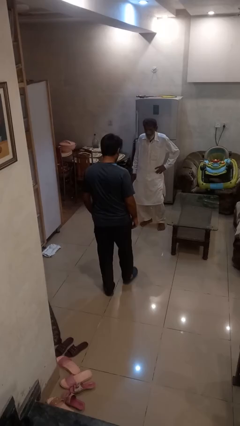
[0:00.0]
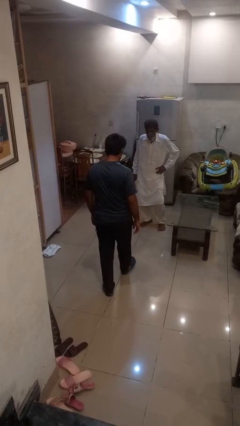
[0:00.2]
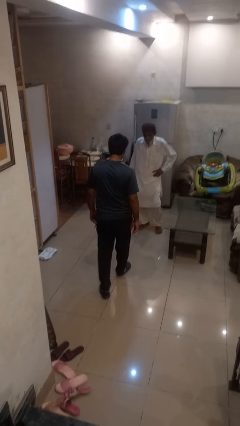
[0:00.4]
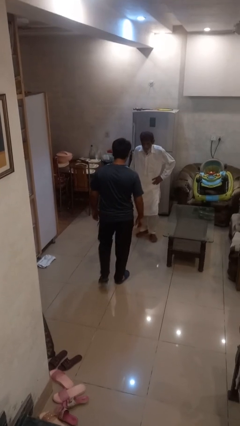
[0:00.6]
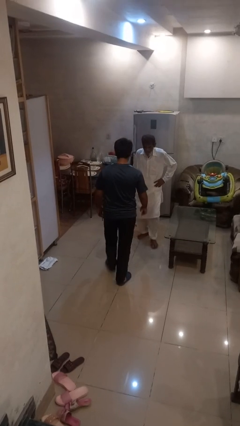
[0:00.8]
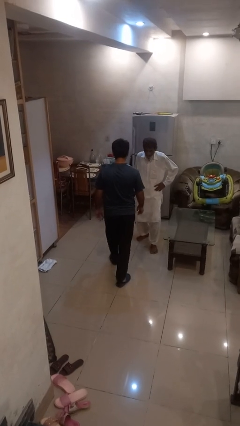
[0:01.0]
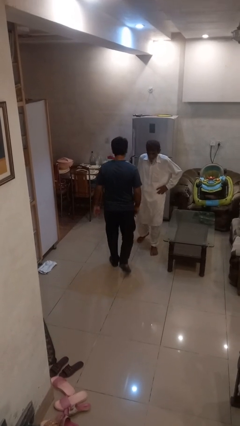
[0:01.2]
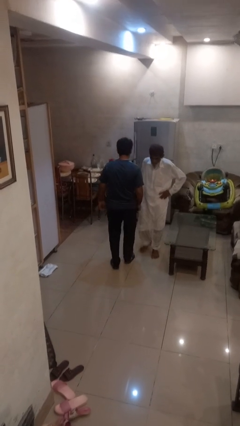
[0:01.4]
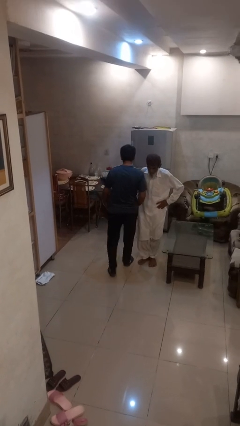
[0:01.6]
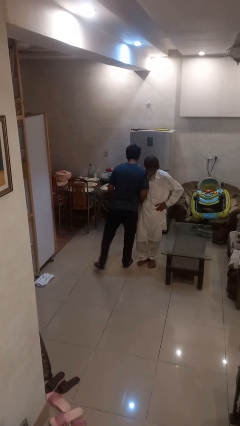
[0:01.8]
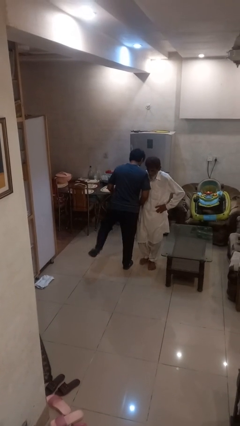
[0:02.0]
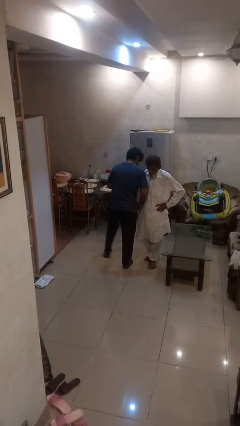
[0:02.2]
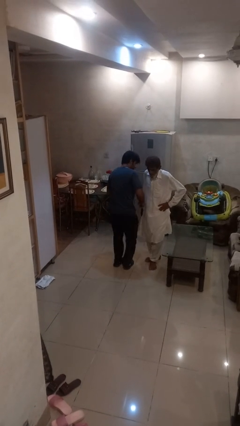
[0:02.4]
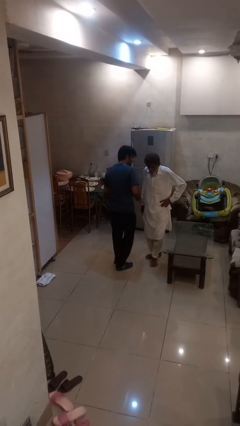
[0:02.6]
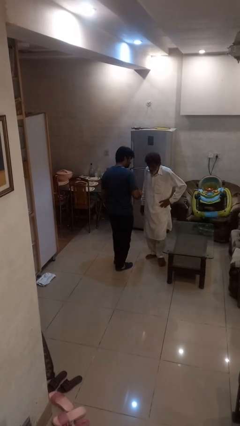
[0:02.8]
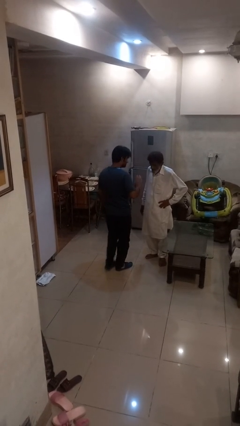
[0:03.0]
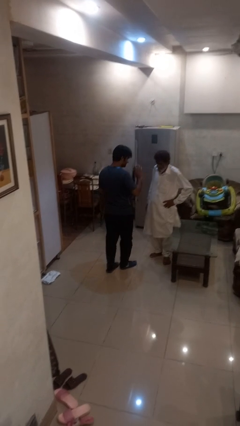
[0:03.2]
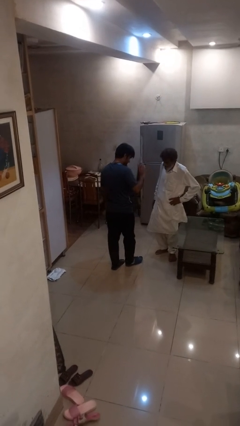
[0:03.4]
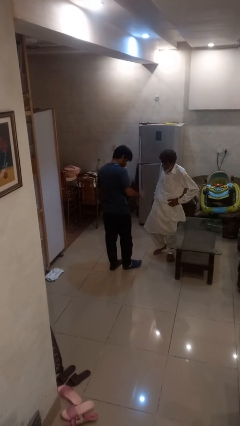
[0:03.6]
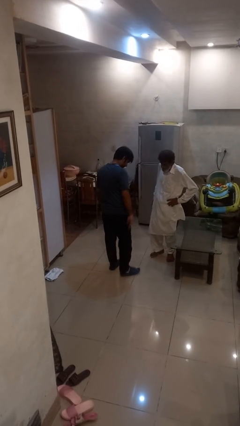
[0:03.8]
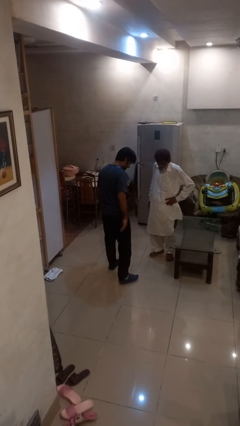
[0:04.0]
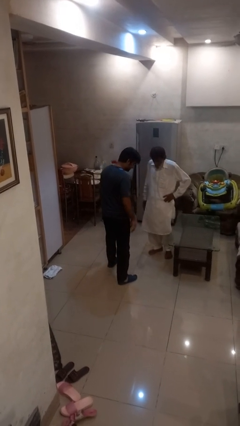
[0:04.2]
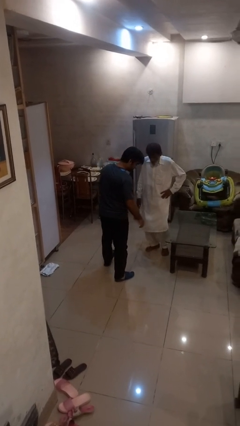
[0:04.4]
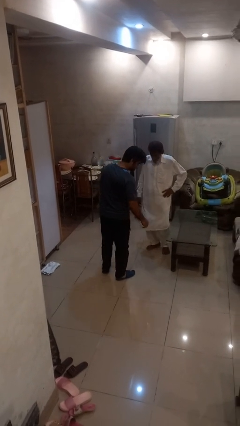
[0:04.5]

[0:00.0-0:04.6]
person bumps into person

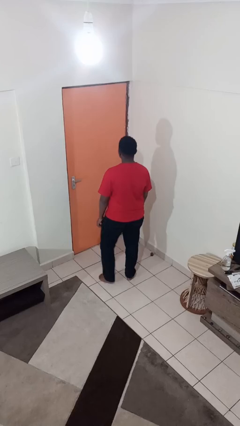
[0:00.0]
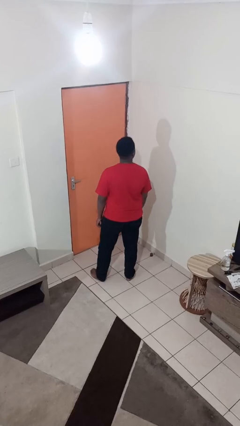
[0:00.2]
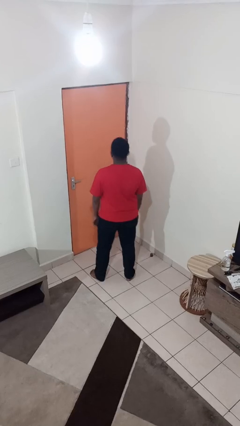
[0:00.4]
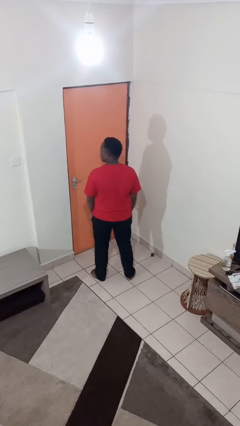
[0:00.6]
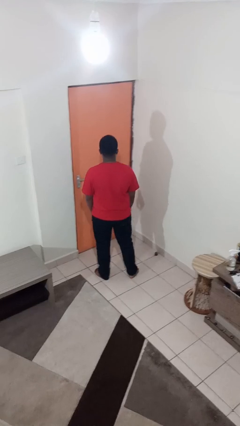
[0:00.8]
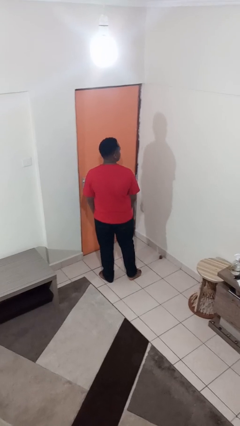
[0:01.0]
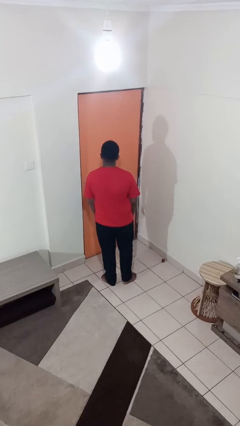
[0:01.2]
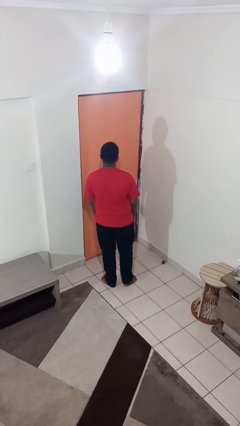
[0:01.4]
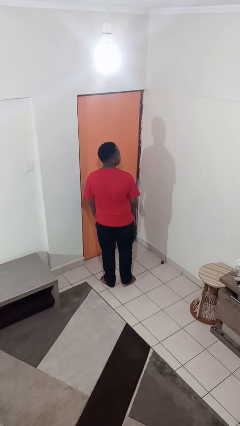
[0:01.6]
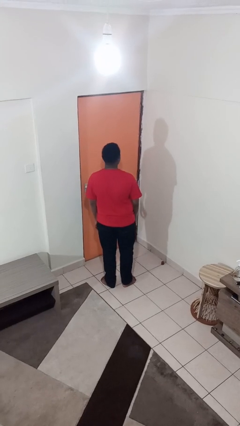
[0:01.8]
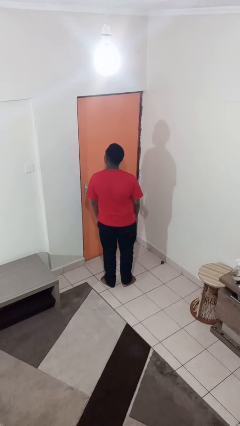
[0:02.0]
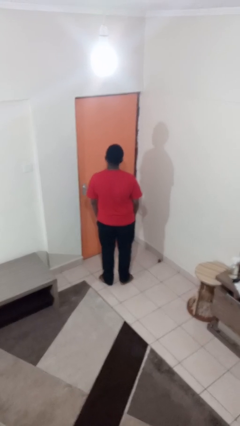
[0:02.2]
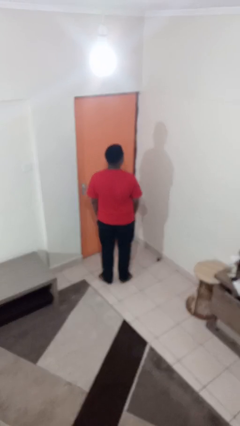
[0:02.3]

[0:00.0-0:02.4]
person shakes head

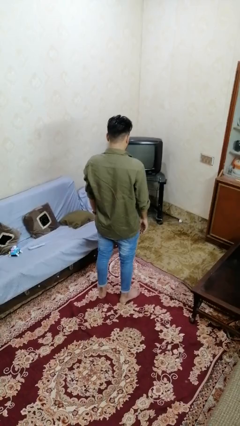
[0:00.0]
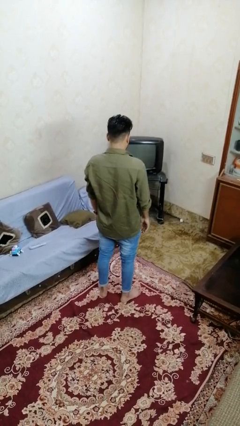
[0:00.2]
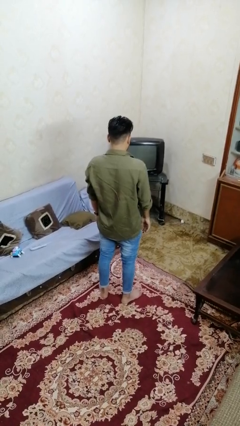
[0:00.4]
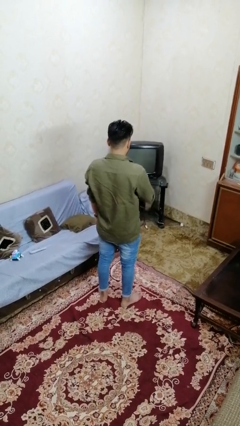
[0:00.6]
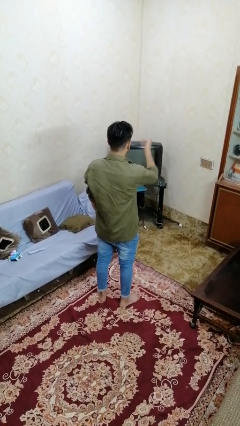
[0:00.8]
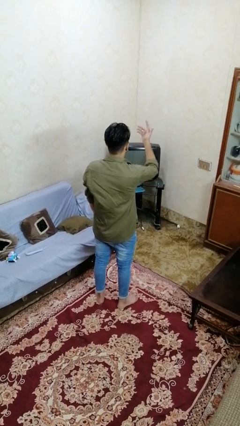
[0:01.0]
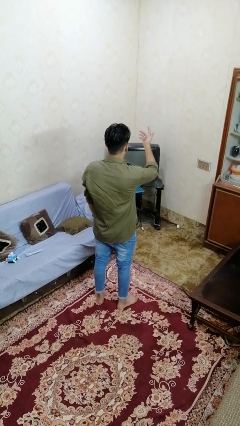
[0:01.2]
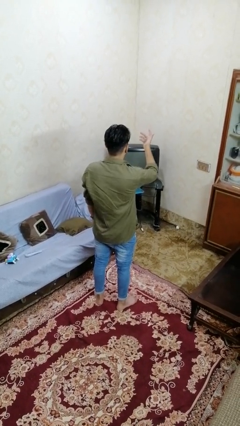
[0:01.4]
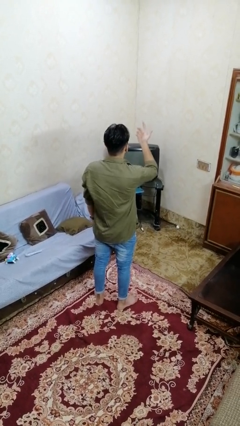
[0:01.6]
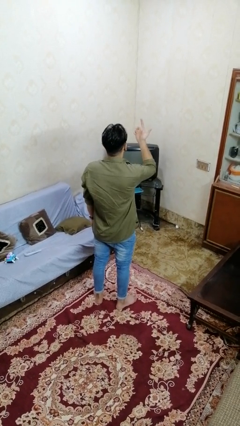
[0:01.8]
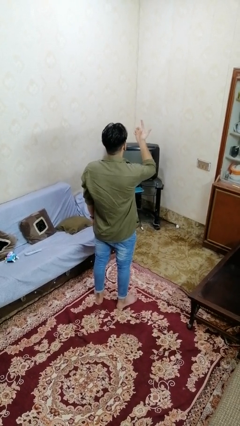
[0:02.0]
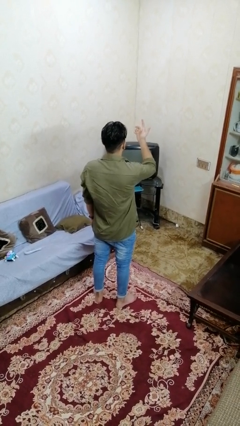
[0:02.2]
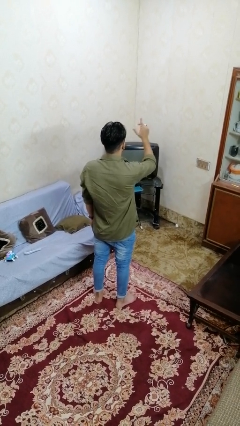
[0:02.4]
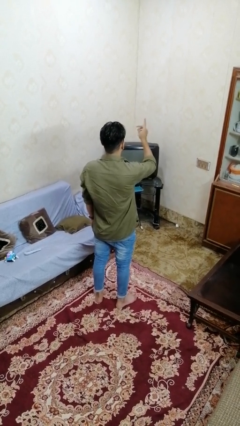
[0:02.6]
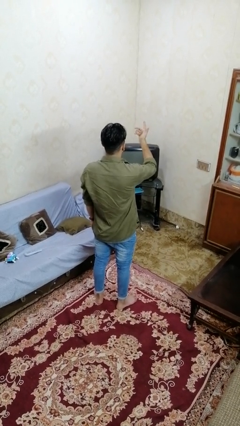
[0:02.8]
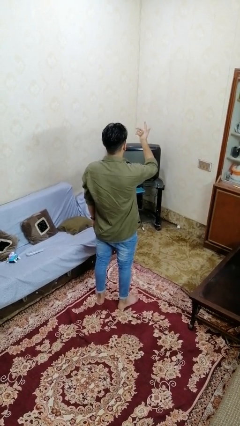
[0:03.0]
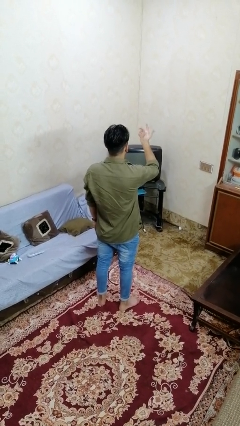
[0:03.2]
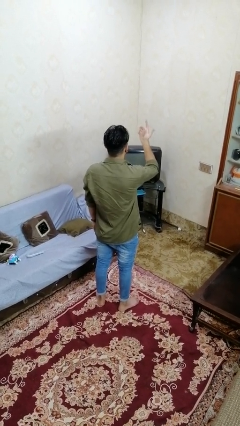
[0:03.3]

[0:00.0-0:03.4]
person gestures raise hand

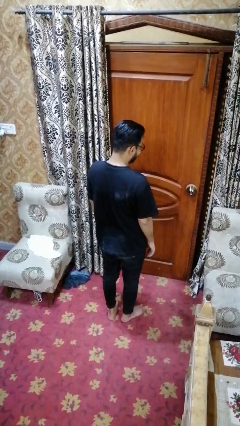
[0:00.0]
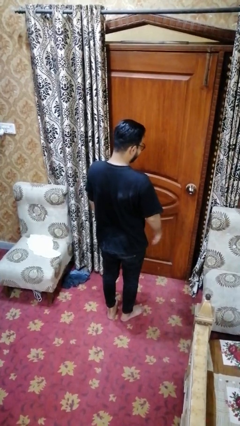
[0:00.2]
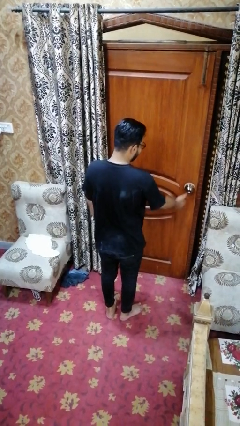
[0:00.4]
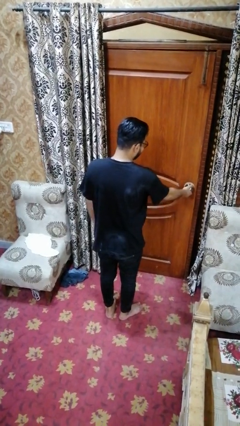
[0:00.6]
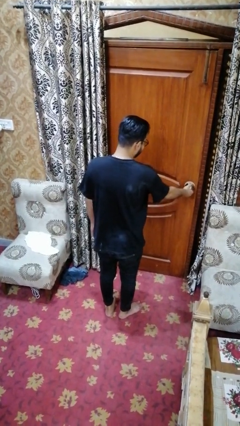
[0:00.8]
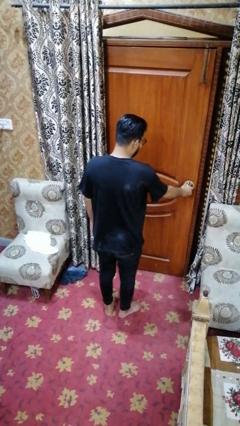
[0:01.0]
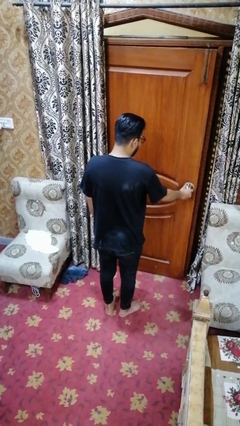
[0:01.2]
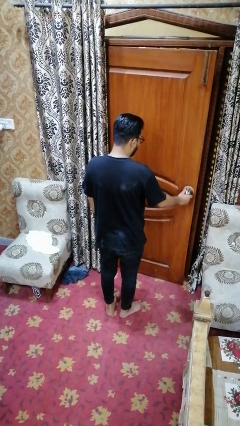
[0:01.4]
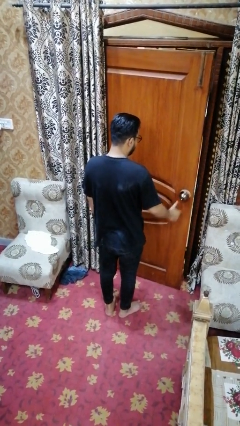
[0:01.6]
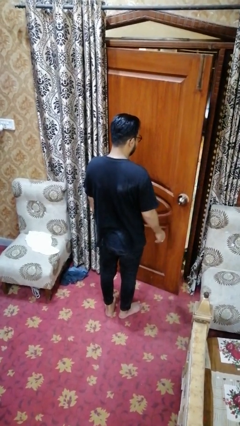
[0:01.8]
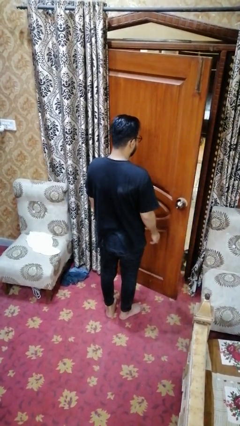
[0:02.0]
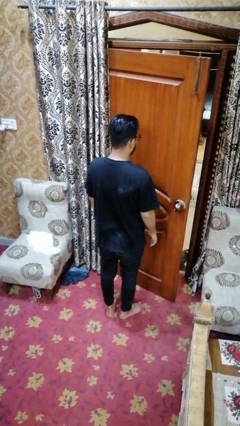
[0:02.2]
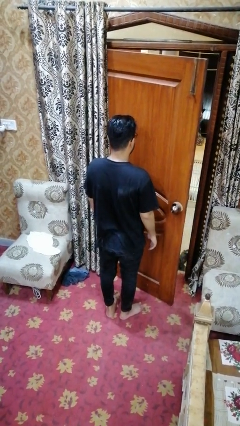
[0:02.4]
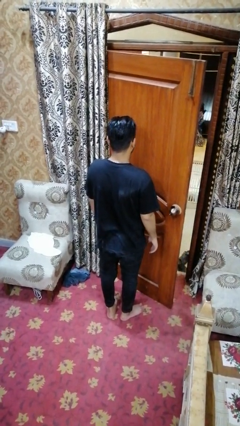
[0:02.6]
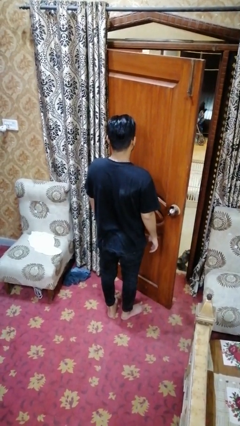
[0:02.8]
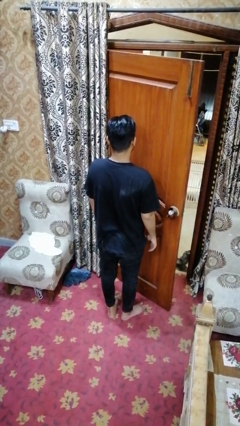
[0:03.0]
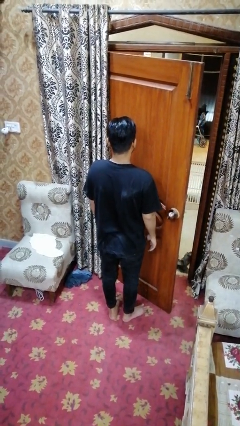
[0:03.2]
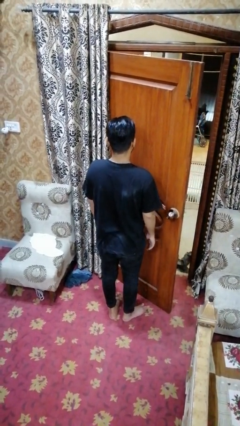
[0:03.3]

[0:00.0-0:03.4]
person opens facility door

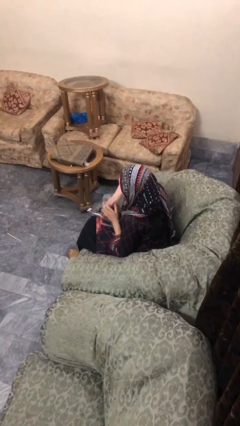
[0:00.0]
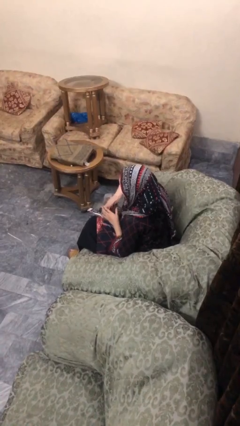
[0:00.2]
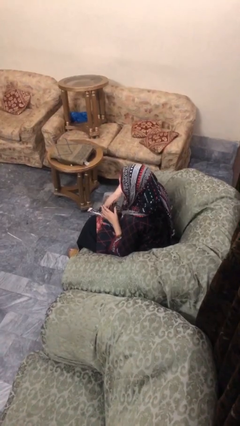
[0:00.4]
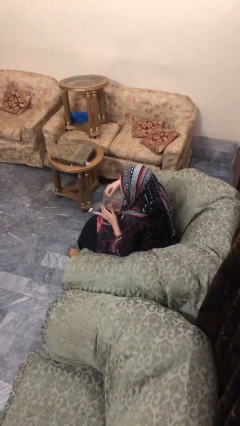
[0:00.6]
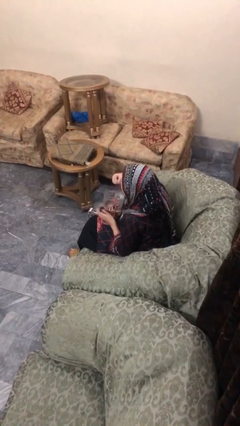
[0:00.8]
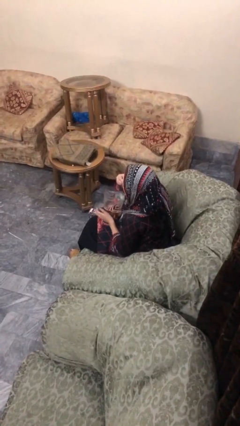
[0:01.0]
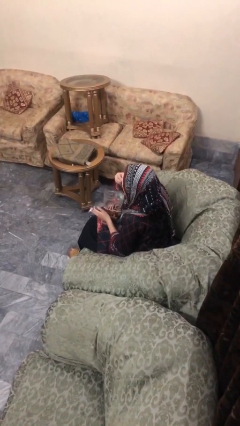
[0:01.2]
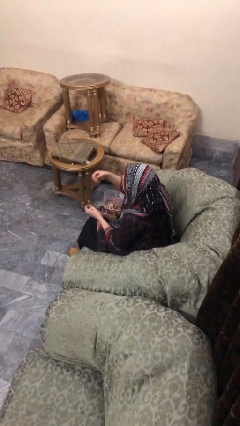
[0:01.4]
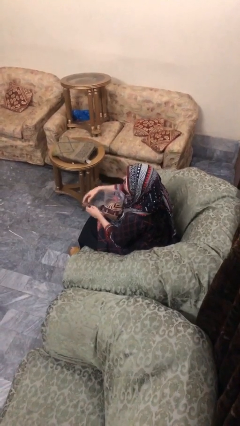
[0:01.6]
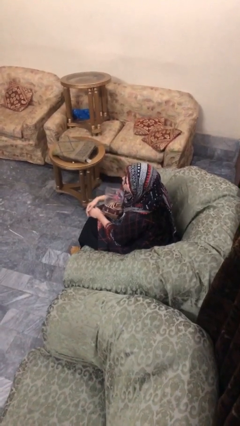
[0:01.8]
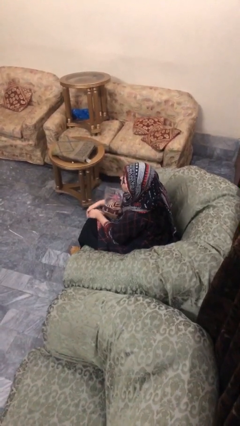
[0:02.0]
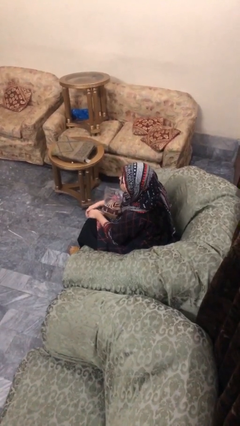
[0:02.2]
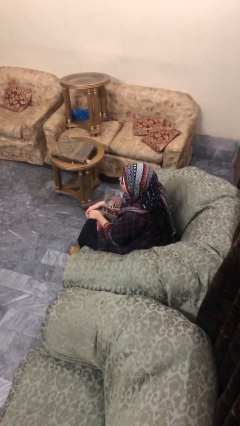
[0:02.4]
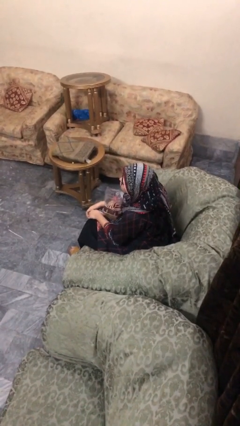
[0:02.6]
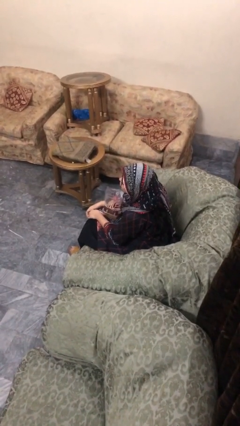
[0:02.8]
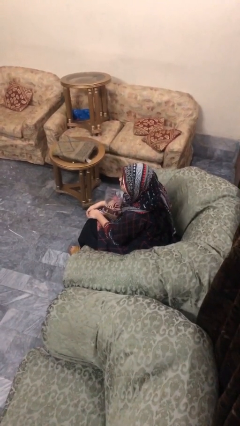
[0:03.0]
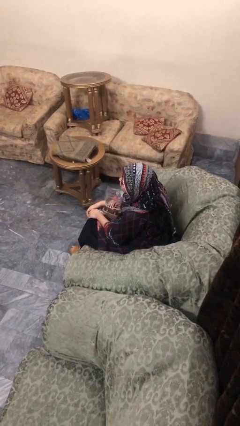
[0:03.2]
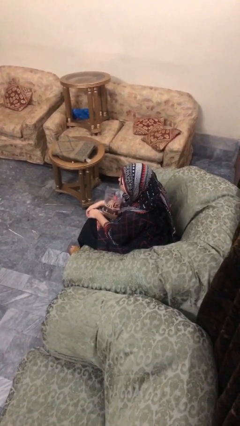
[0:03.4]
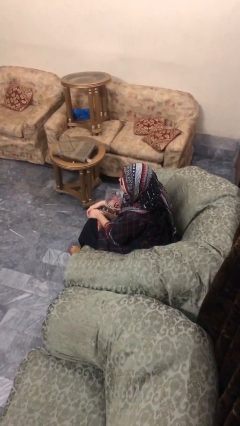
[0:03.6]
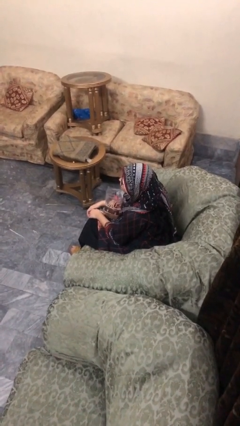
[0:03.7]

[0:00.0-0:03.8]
person eats snack from bag

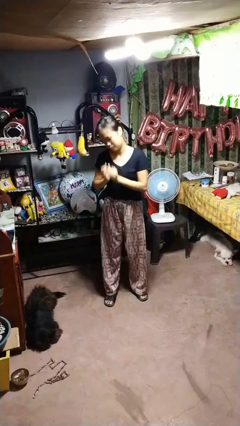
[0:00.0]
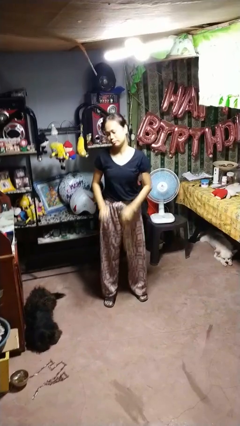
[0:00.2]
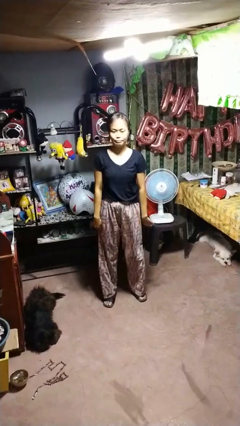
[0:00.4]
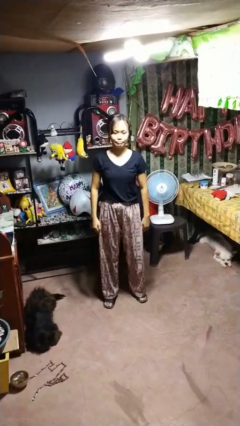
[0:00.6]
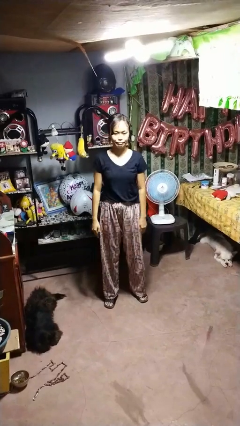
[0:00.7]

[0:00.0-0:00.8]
person sneezes into hand
